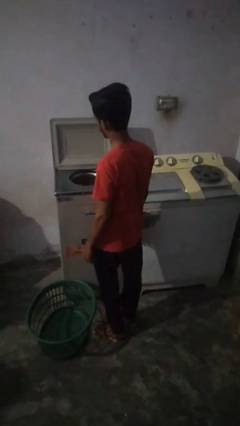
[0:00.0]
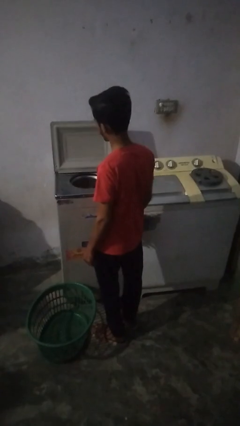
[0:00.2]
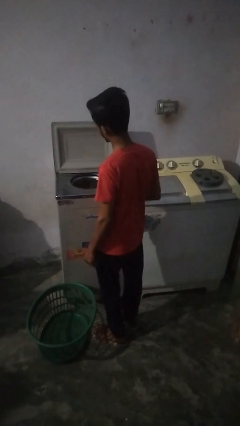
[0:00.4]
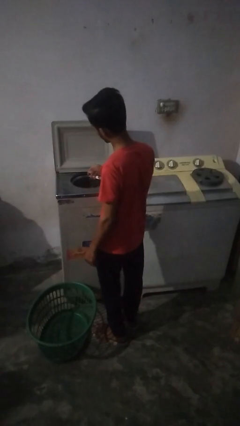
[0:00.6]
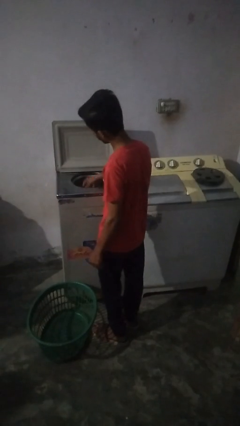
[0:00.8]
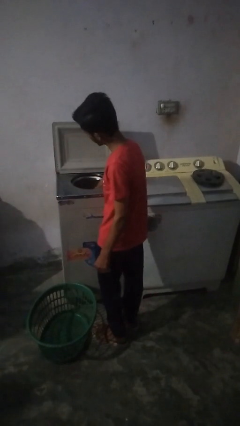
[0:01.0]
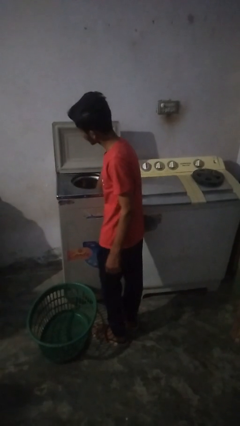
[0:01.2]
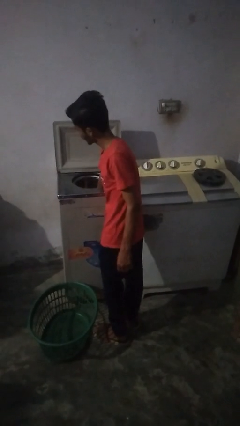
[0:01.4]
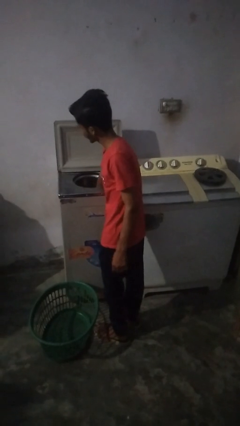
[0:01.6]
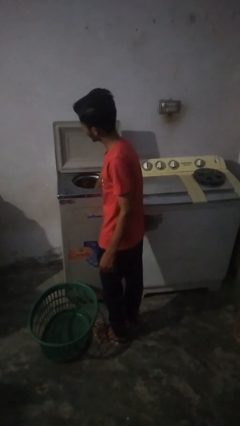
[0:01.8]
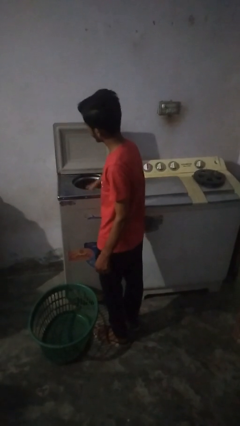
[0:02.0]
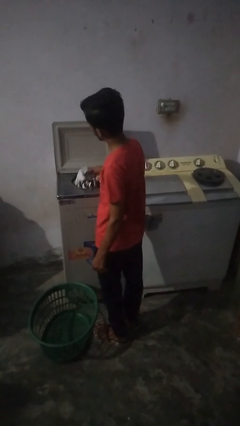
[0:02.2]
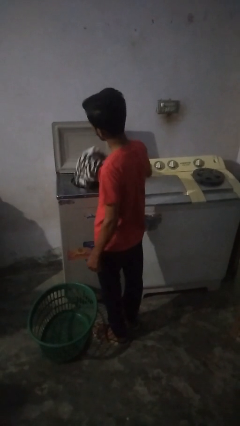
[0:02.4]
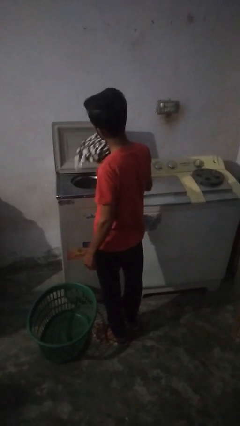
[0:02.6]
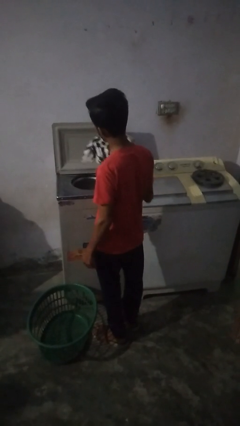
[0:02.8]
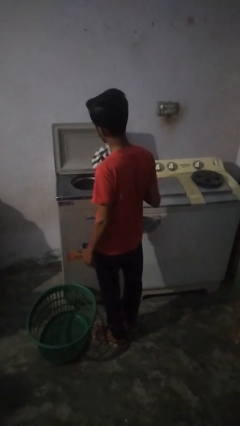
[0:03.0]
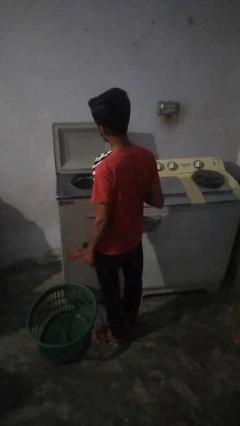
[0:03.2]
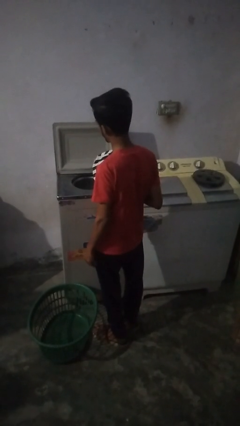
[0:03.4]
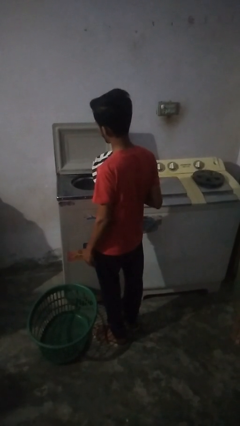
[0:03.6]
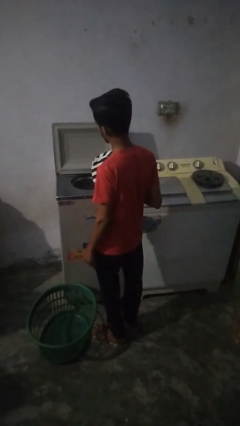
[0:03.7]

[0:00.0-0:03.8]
person unloads dryer

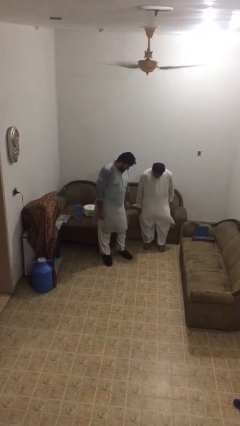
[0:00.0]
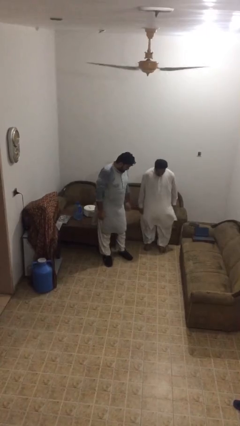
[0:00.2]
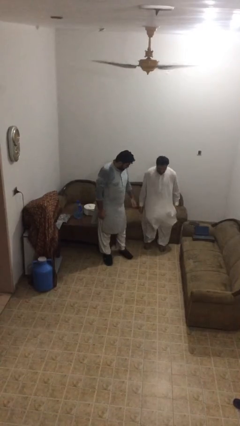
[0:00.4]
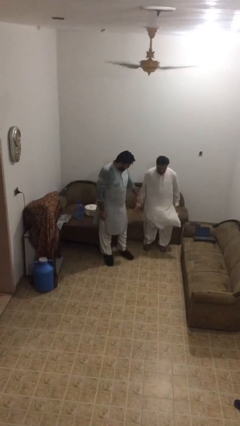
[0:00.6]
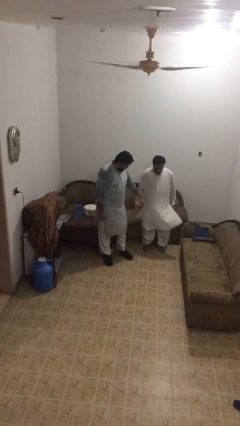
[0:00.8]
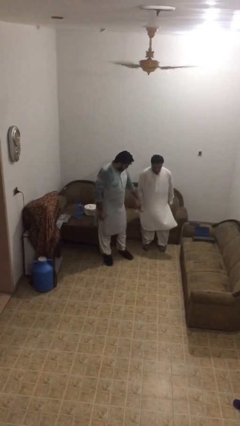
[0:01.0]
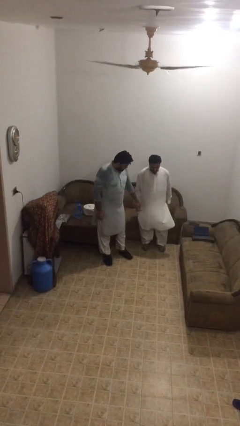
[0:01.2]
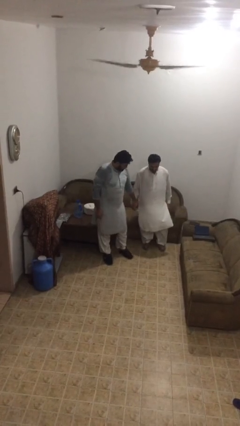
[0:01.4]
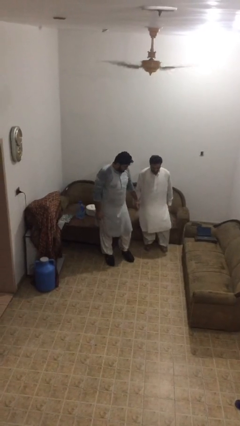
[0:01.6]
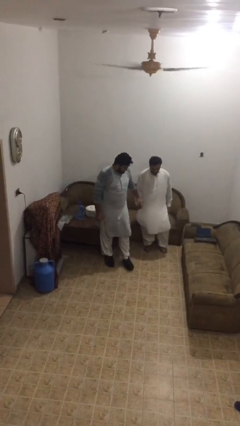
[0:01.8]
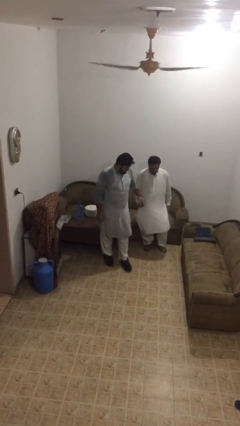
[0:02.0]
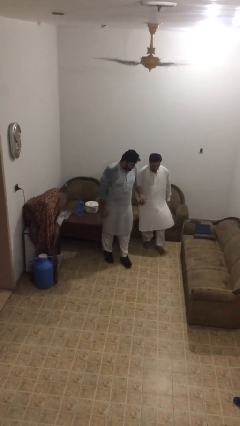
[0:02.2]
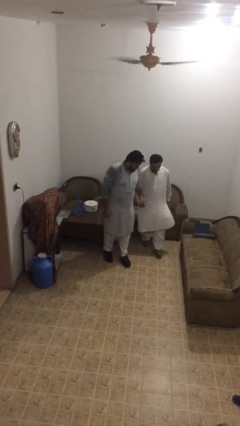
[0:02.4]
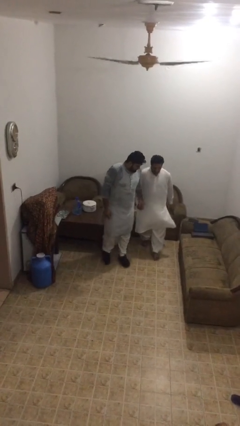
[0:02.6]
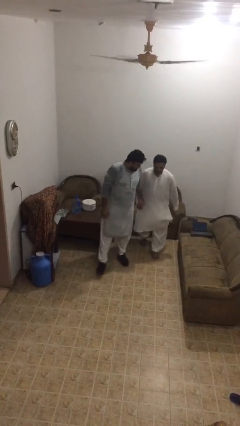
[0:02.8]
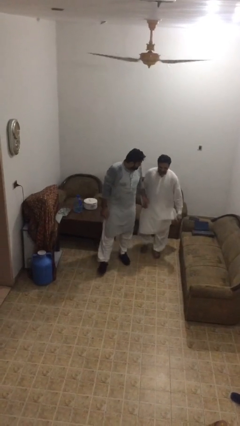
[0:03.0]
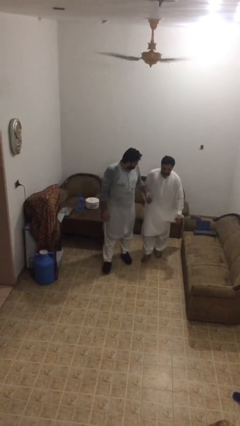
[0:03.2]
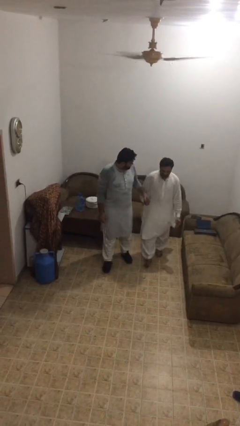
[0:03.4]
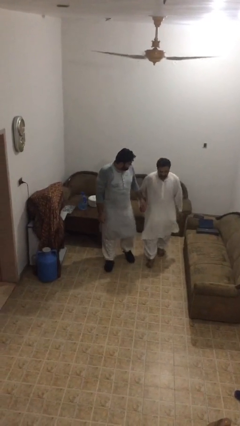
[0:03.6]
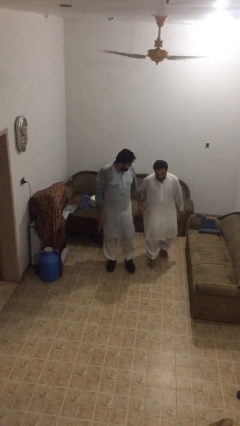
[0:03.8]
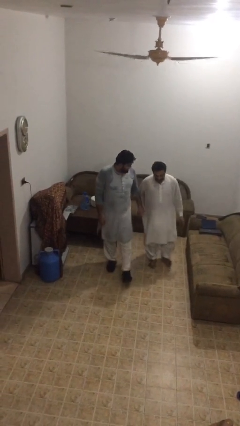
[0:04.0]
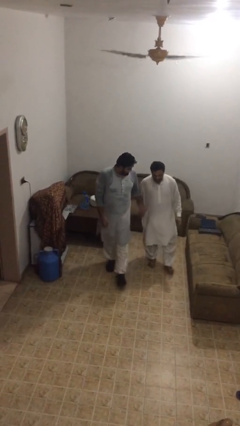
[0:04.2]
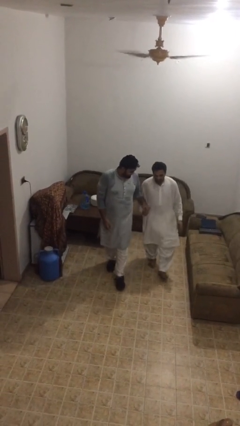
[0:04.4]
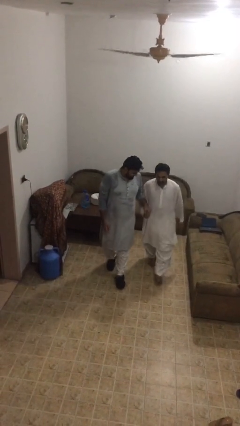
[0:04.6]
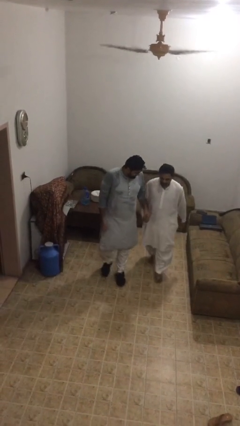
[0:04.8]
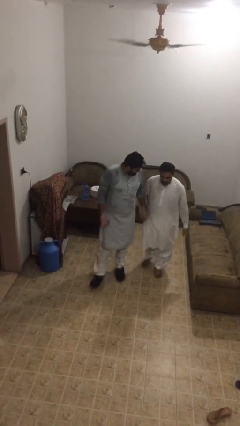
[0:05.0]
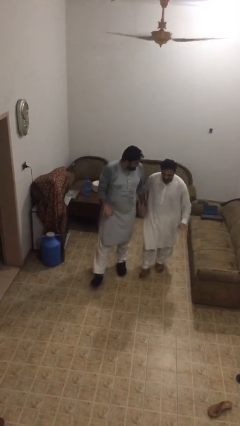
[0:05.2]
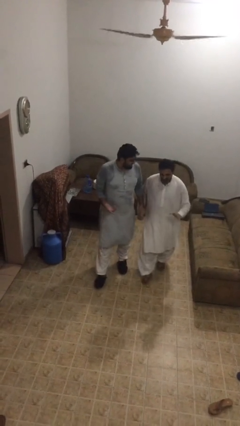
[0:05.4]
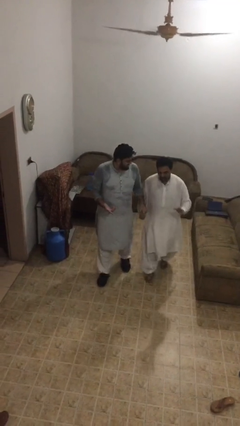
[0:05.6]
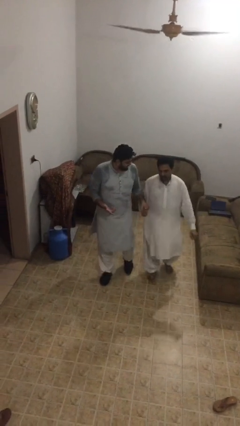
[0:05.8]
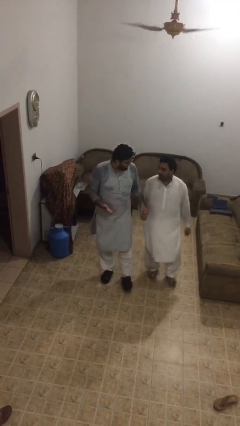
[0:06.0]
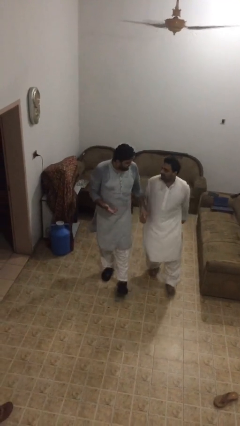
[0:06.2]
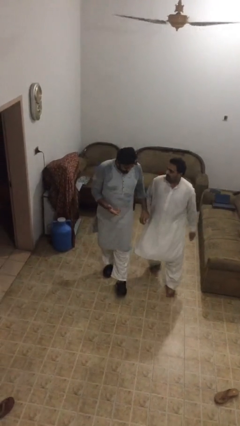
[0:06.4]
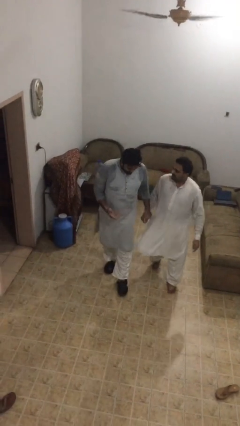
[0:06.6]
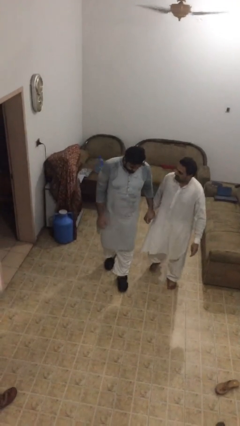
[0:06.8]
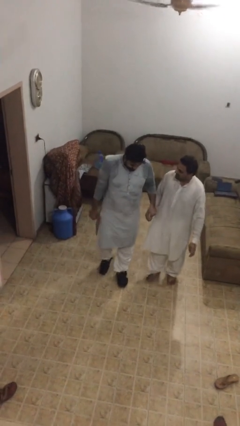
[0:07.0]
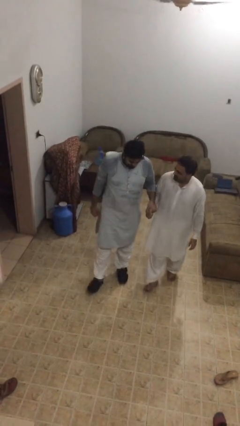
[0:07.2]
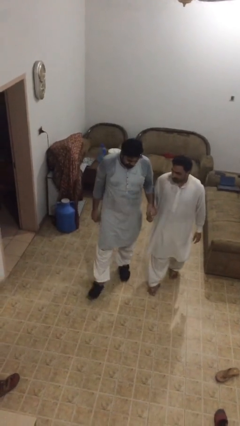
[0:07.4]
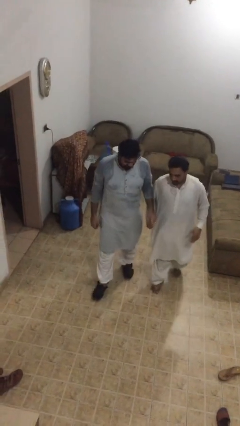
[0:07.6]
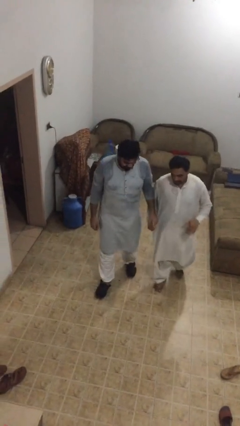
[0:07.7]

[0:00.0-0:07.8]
person holds hand

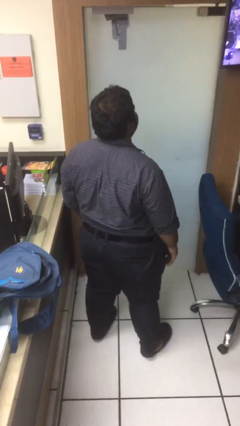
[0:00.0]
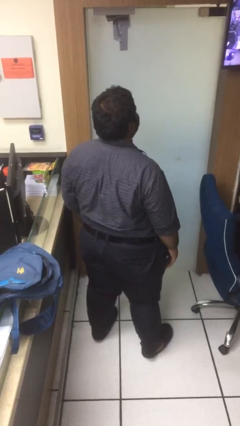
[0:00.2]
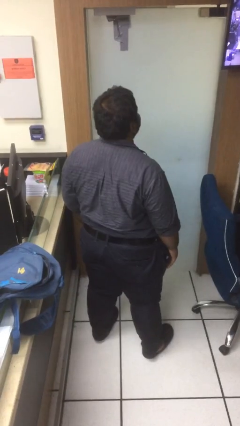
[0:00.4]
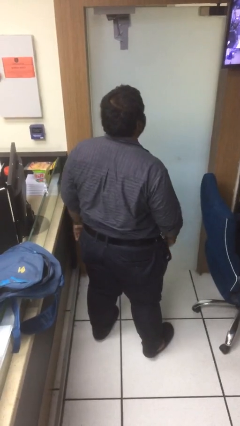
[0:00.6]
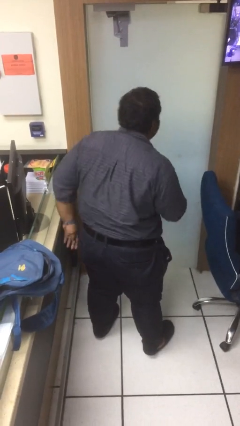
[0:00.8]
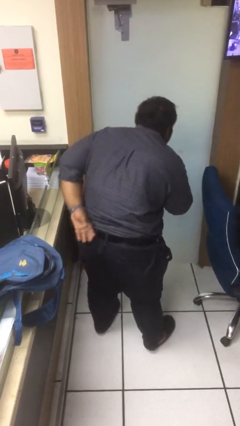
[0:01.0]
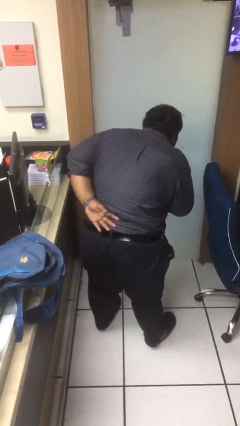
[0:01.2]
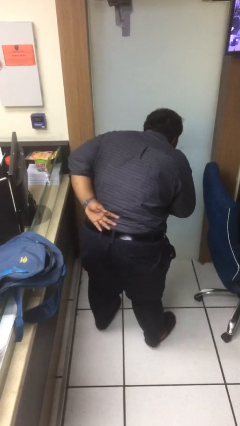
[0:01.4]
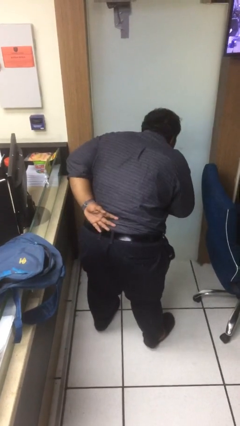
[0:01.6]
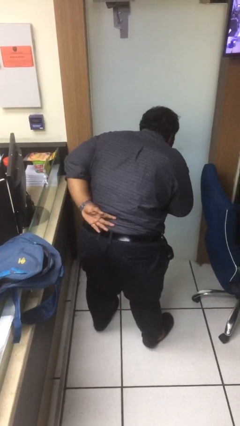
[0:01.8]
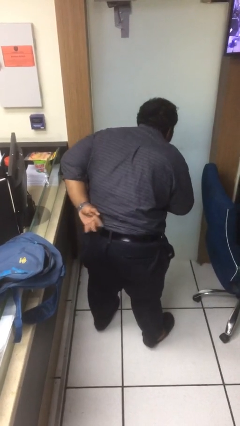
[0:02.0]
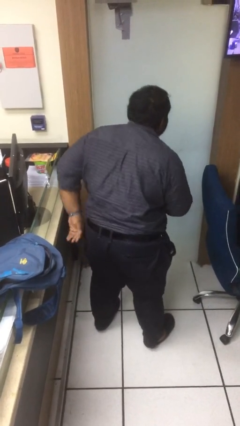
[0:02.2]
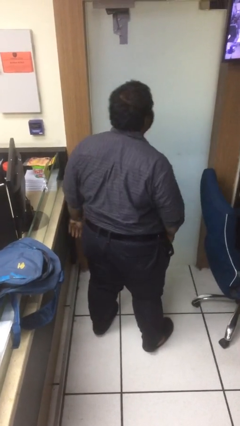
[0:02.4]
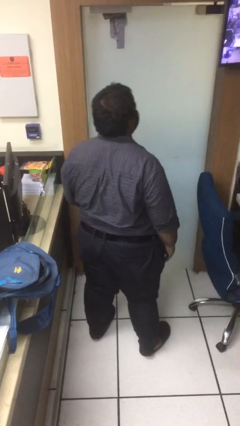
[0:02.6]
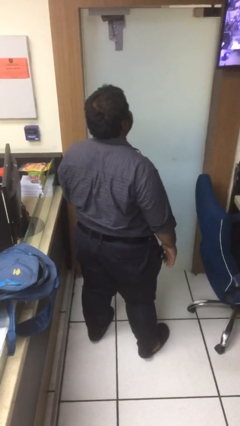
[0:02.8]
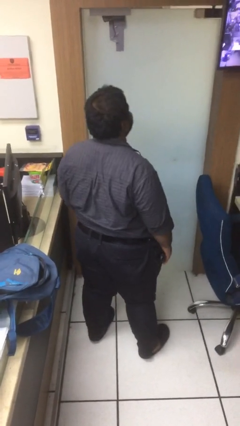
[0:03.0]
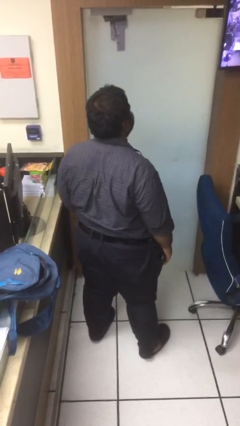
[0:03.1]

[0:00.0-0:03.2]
person bows

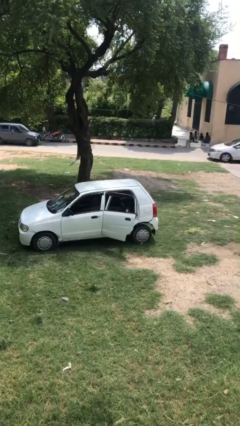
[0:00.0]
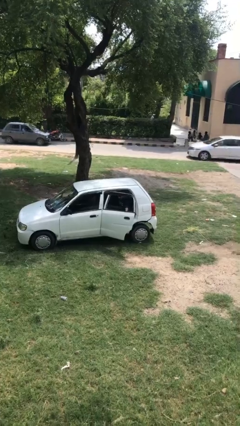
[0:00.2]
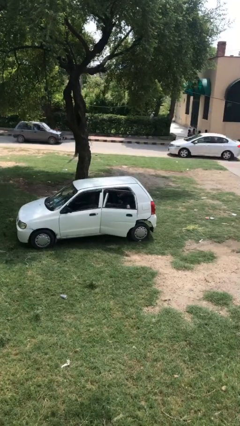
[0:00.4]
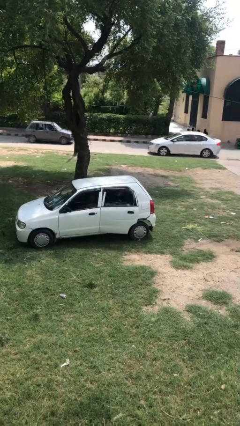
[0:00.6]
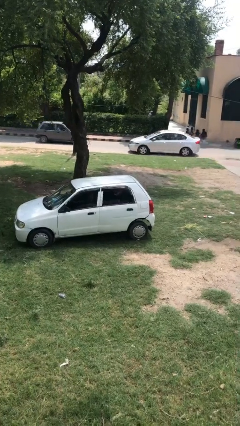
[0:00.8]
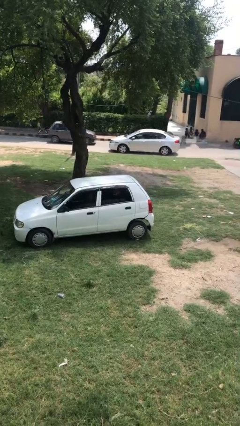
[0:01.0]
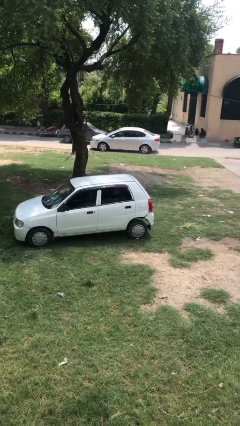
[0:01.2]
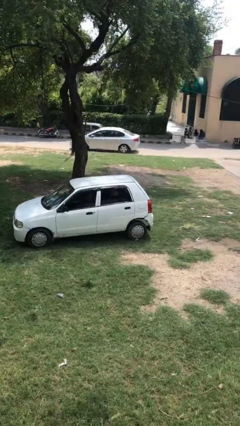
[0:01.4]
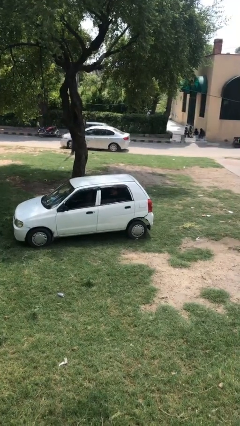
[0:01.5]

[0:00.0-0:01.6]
person closes car door

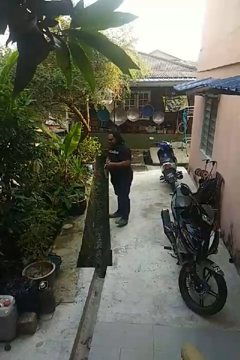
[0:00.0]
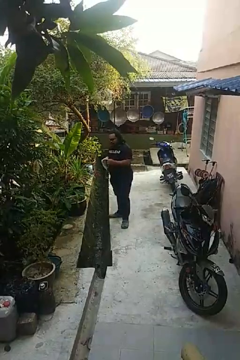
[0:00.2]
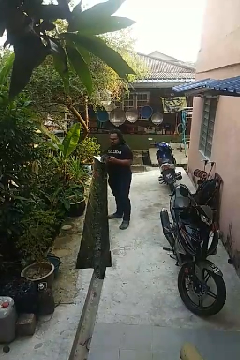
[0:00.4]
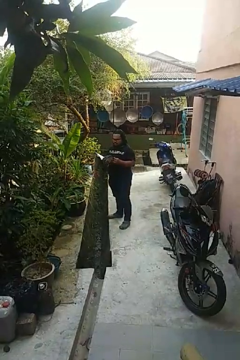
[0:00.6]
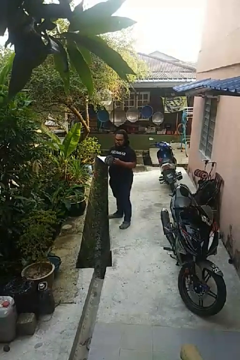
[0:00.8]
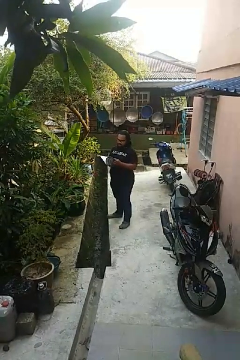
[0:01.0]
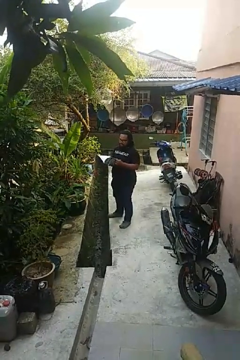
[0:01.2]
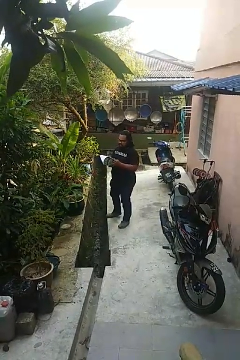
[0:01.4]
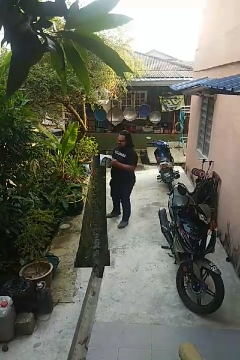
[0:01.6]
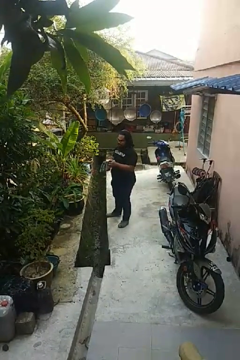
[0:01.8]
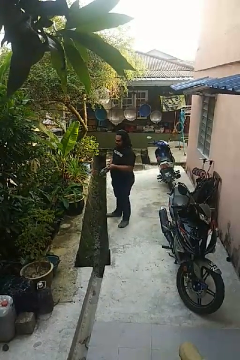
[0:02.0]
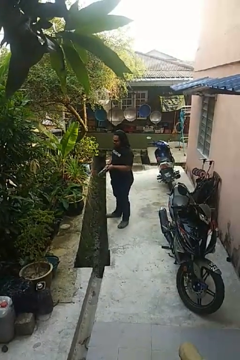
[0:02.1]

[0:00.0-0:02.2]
person reads magazine
